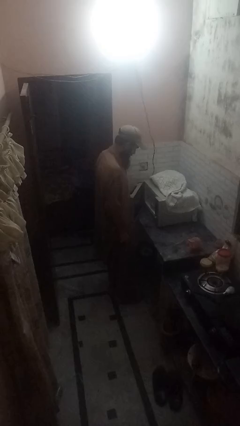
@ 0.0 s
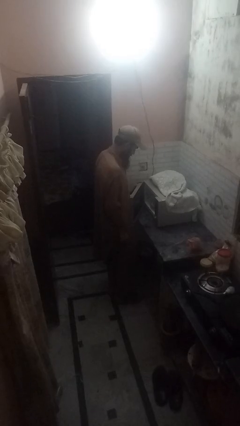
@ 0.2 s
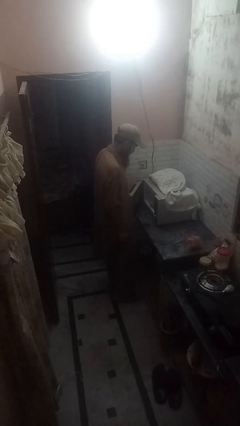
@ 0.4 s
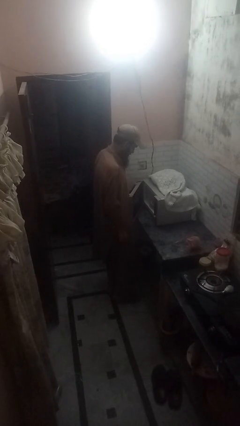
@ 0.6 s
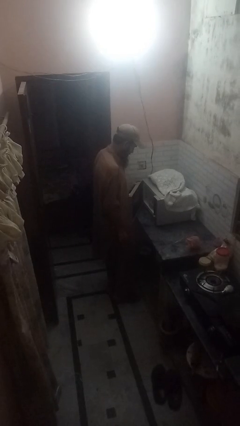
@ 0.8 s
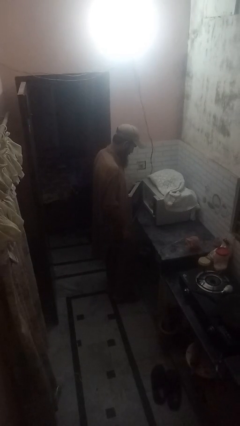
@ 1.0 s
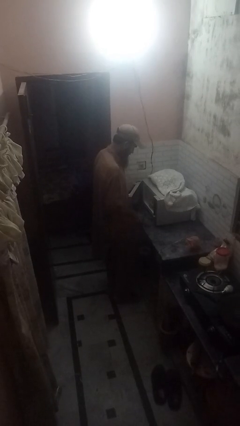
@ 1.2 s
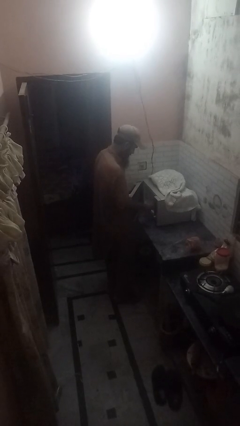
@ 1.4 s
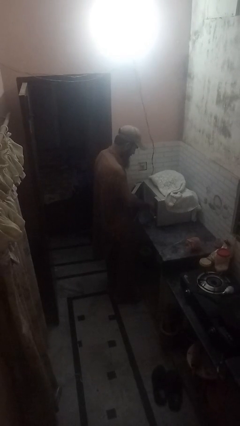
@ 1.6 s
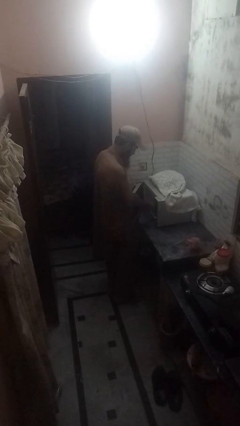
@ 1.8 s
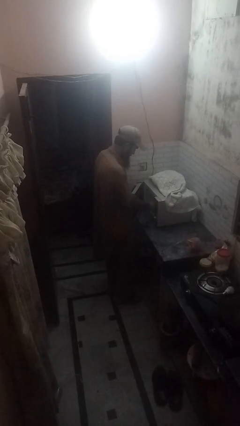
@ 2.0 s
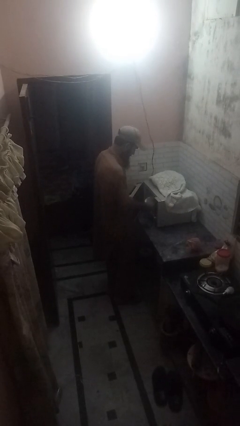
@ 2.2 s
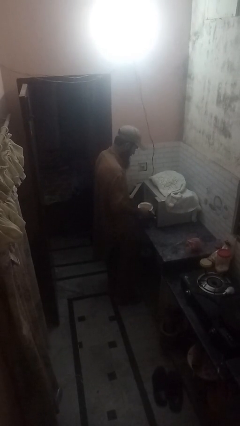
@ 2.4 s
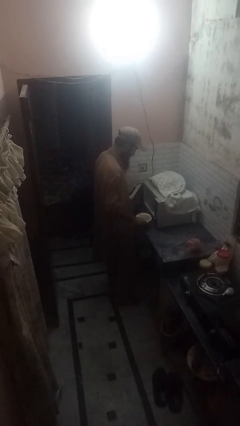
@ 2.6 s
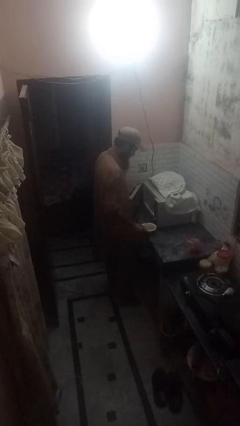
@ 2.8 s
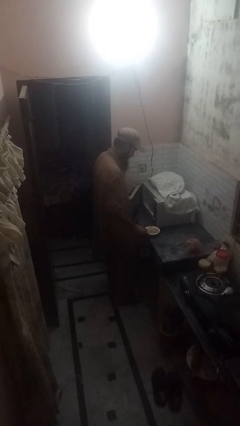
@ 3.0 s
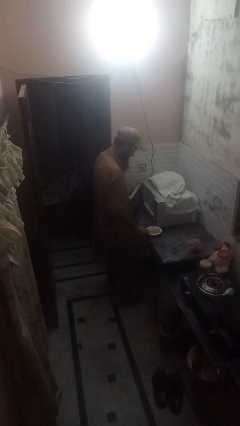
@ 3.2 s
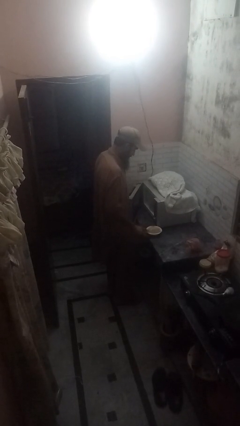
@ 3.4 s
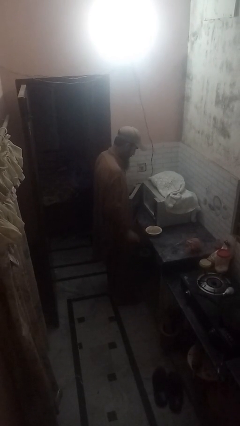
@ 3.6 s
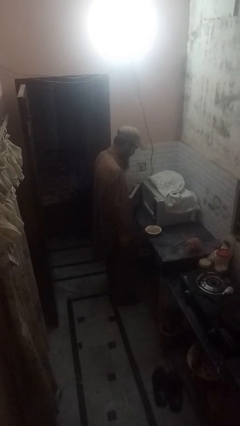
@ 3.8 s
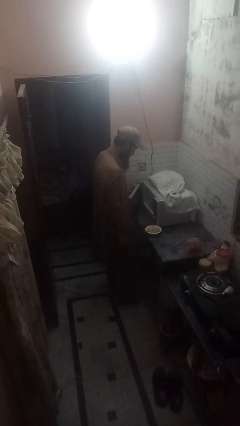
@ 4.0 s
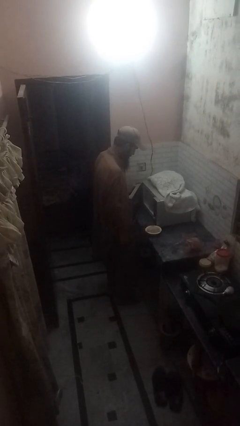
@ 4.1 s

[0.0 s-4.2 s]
person takes object from microwave

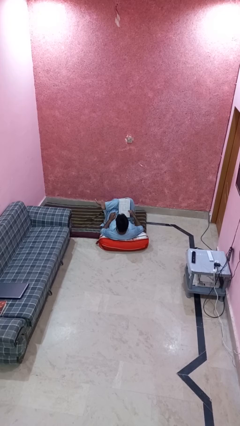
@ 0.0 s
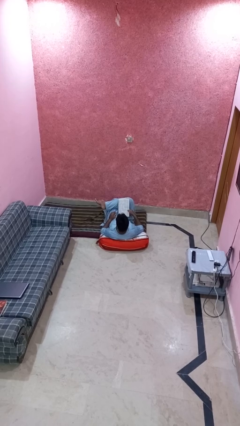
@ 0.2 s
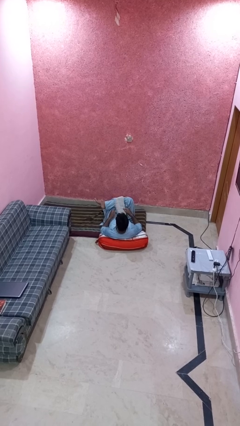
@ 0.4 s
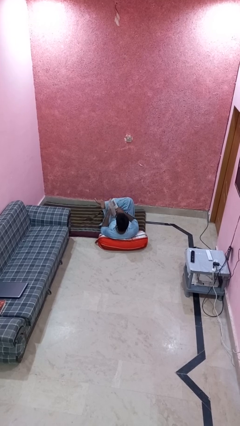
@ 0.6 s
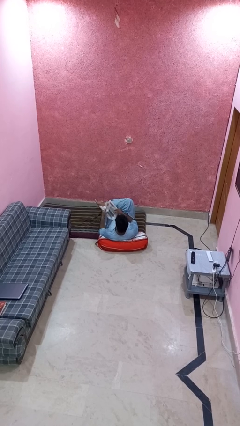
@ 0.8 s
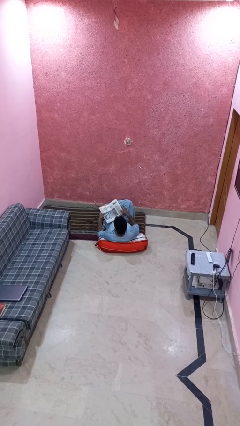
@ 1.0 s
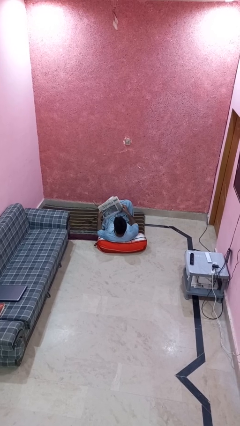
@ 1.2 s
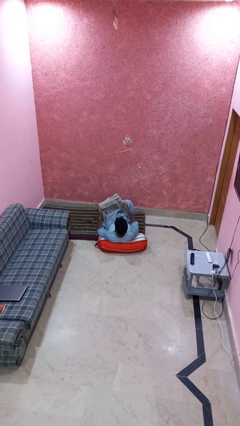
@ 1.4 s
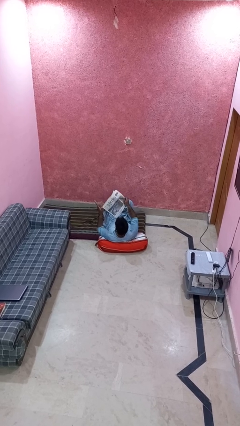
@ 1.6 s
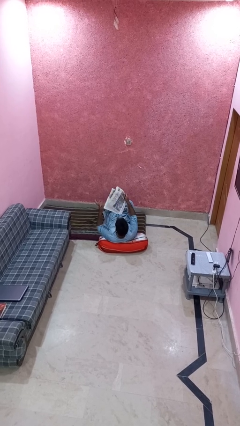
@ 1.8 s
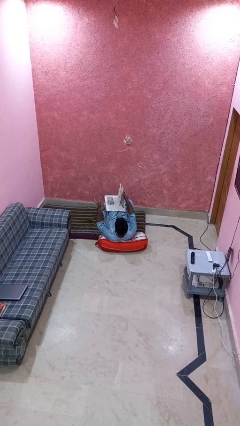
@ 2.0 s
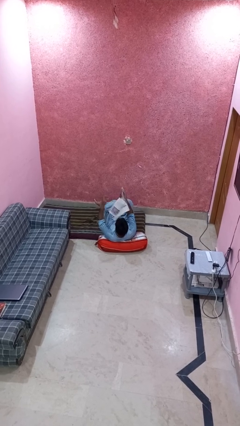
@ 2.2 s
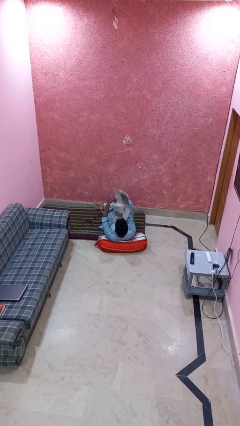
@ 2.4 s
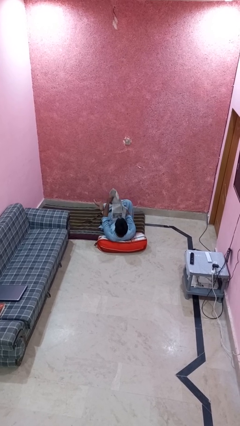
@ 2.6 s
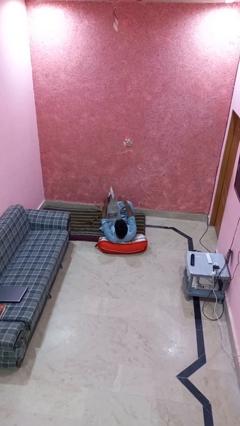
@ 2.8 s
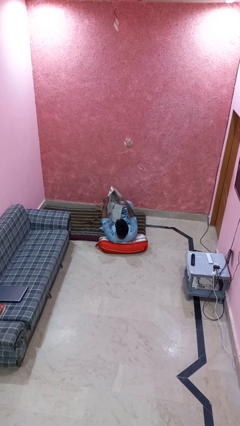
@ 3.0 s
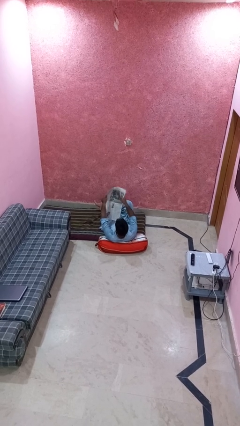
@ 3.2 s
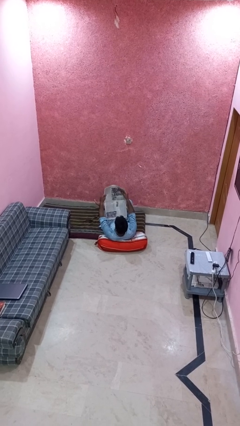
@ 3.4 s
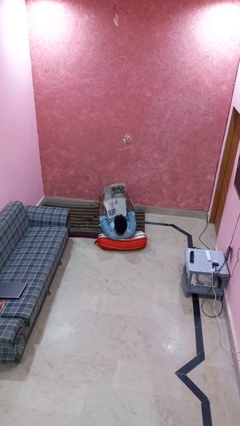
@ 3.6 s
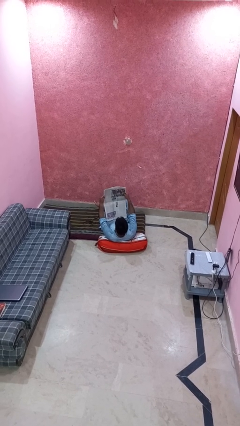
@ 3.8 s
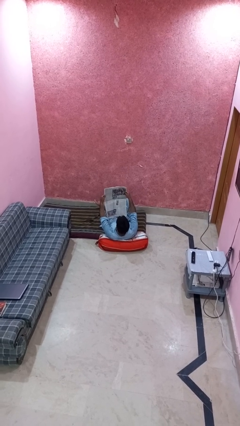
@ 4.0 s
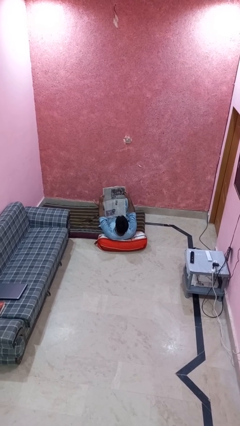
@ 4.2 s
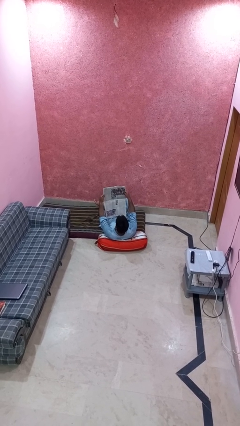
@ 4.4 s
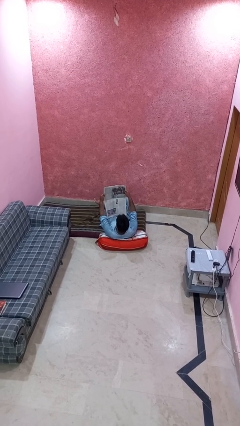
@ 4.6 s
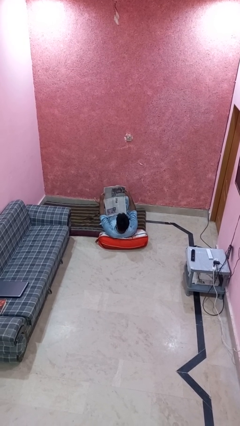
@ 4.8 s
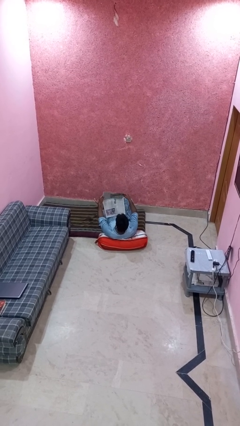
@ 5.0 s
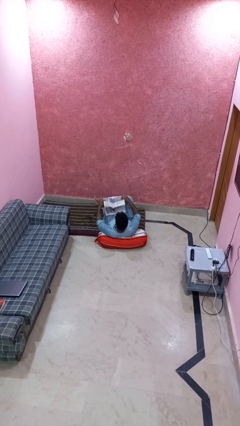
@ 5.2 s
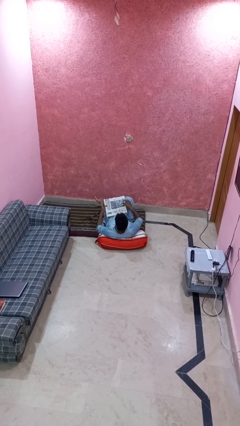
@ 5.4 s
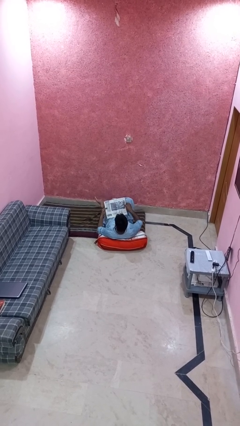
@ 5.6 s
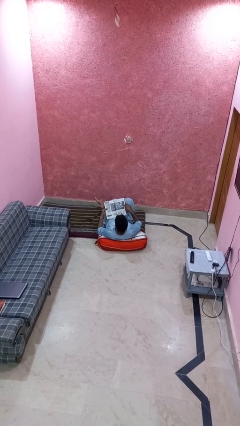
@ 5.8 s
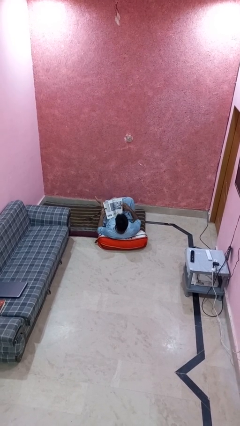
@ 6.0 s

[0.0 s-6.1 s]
person reads newspaper

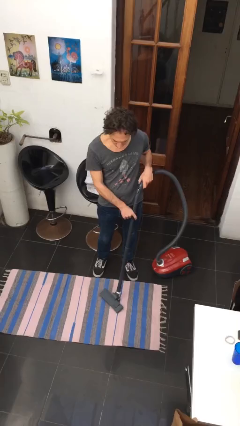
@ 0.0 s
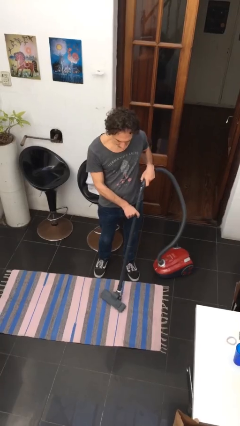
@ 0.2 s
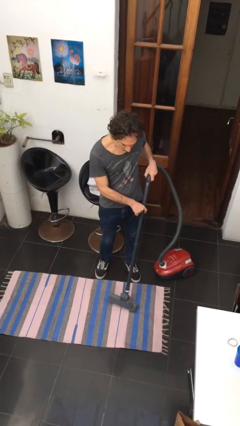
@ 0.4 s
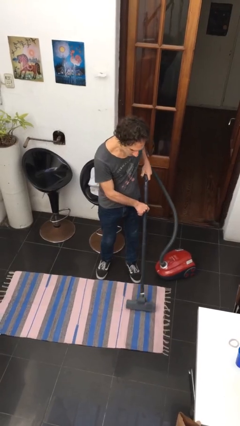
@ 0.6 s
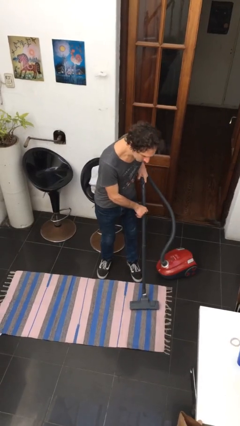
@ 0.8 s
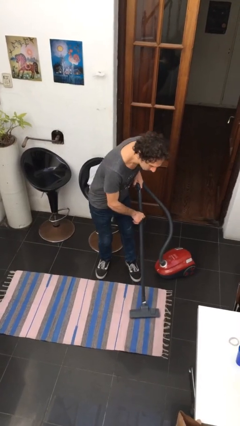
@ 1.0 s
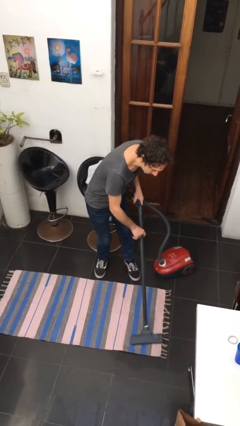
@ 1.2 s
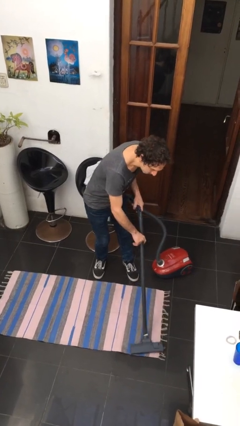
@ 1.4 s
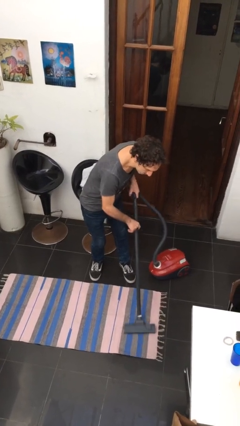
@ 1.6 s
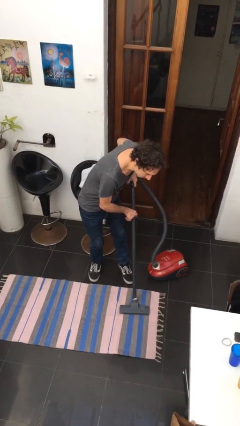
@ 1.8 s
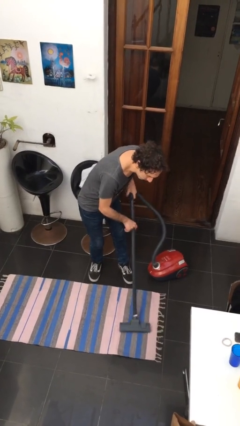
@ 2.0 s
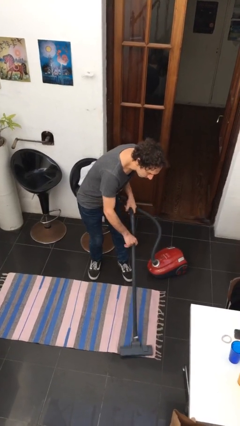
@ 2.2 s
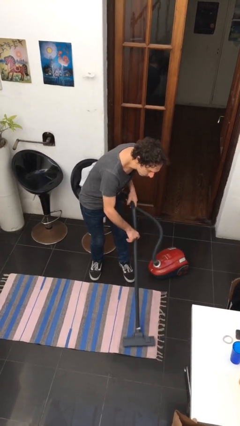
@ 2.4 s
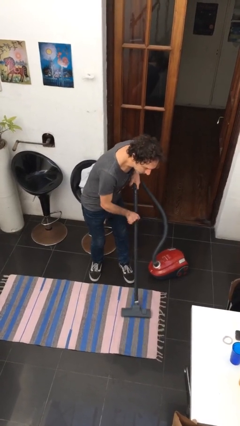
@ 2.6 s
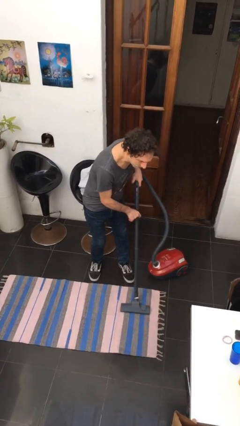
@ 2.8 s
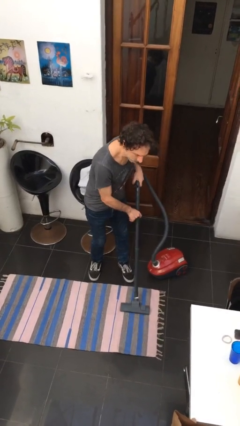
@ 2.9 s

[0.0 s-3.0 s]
person vacuums carpet

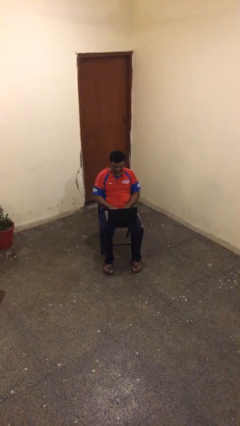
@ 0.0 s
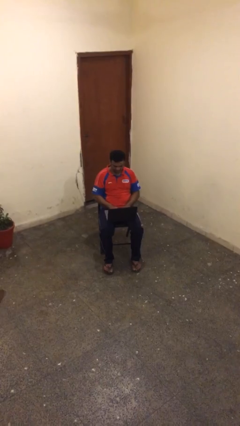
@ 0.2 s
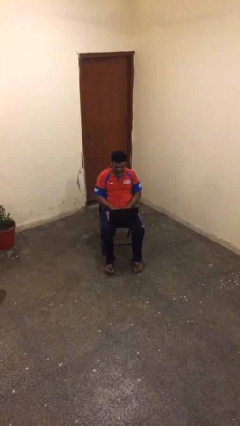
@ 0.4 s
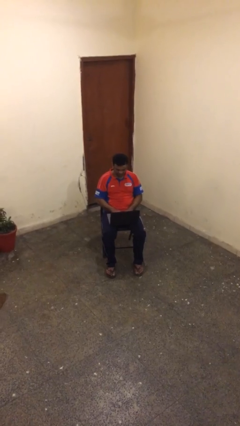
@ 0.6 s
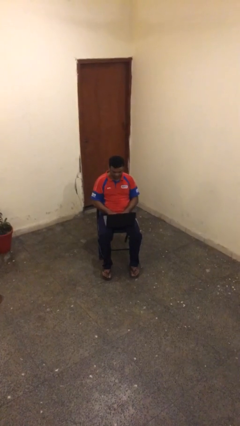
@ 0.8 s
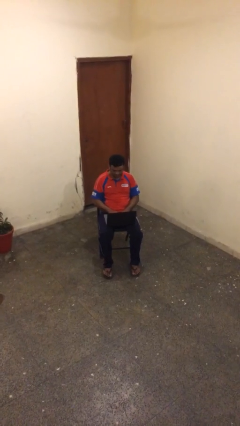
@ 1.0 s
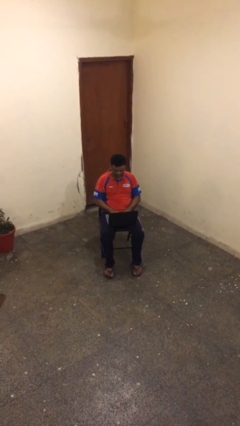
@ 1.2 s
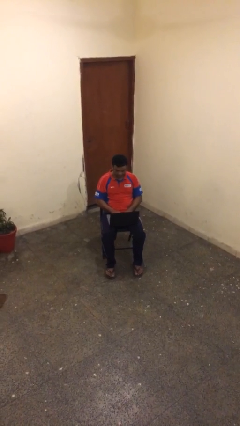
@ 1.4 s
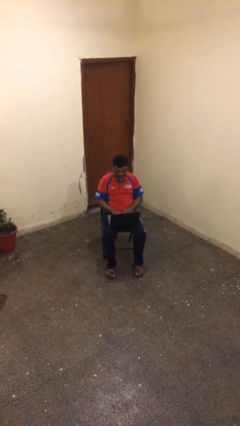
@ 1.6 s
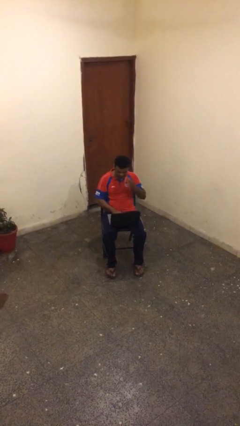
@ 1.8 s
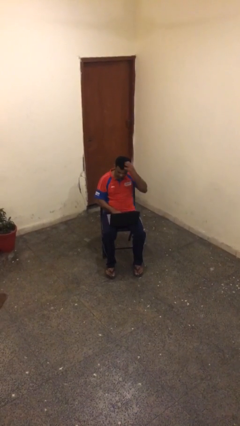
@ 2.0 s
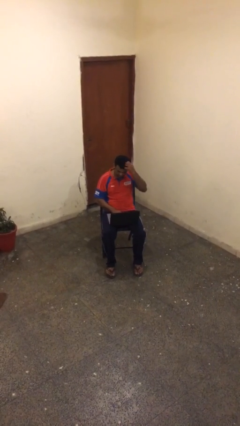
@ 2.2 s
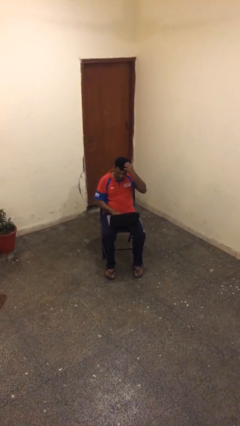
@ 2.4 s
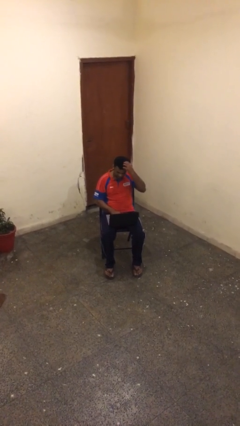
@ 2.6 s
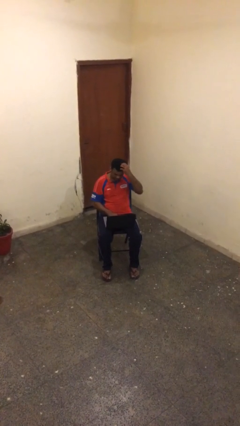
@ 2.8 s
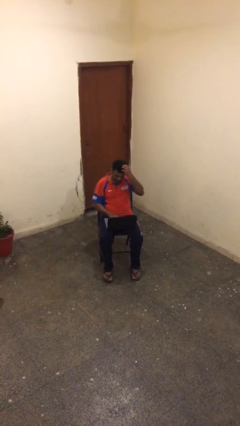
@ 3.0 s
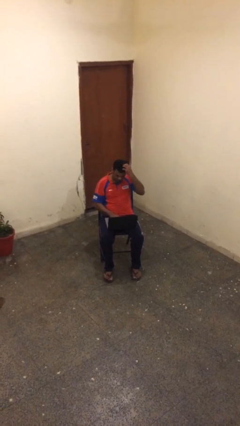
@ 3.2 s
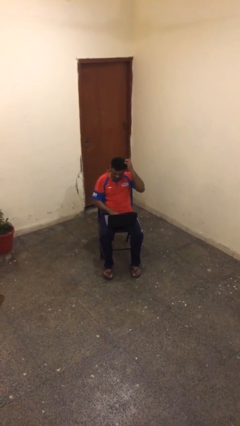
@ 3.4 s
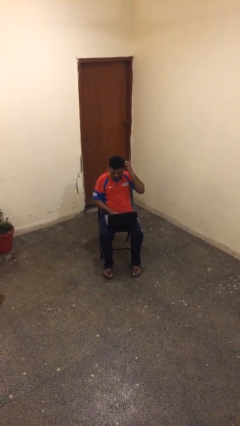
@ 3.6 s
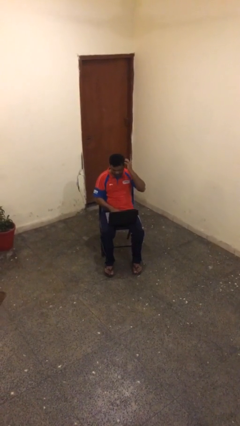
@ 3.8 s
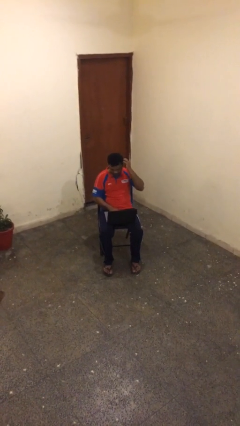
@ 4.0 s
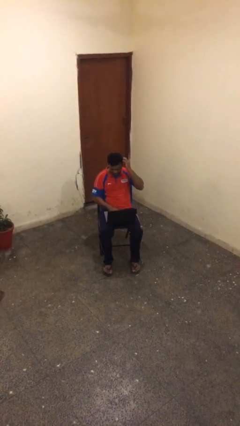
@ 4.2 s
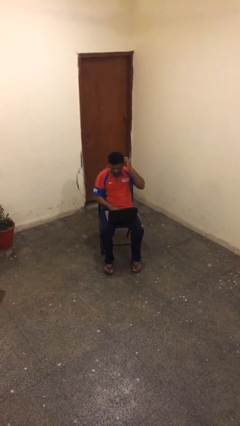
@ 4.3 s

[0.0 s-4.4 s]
person interacts with laptop
